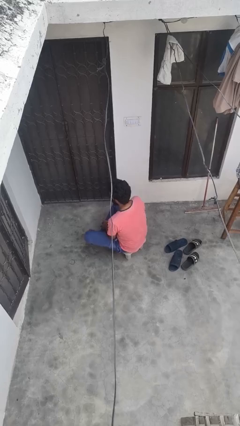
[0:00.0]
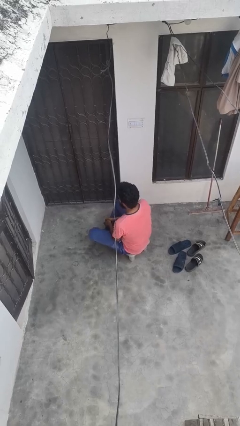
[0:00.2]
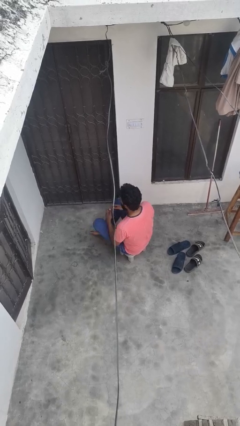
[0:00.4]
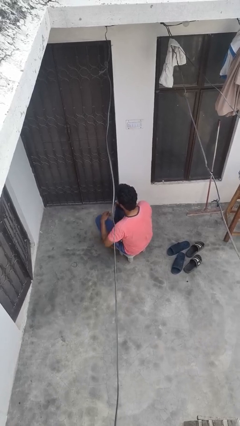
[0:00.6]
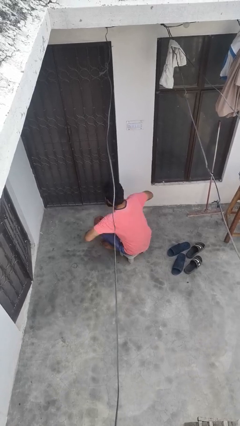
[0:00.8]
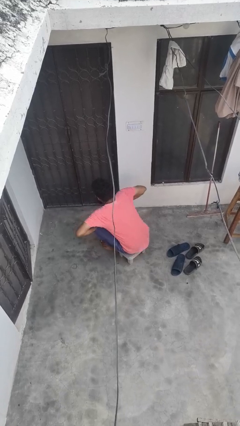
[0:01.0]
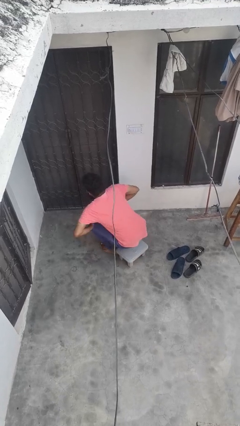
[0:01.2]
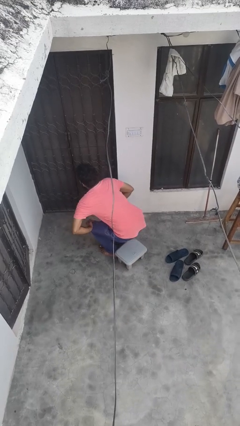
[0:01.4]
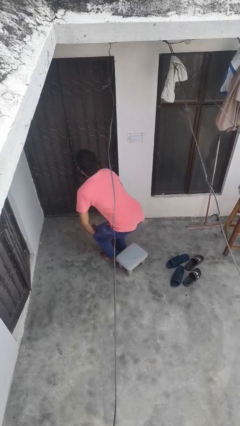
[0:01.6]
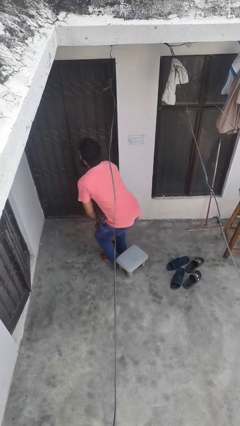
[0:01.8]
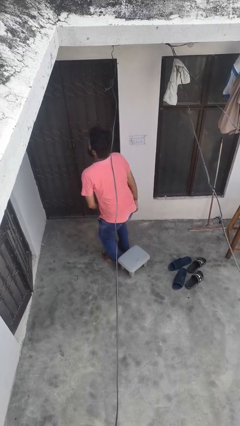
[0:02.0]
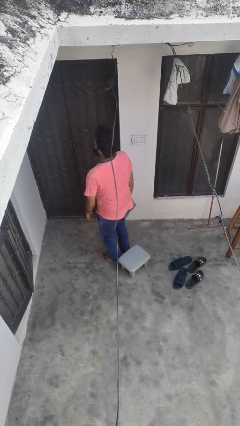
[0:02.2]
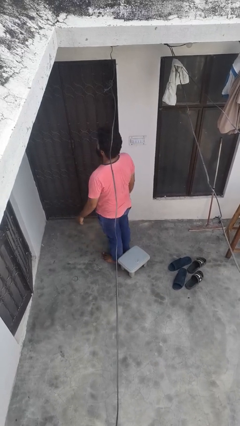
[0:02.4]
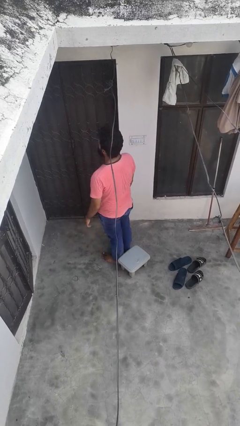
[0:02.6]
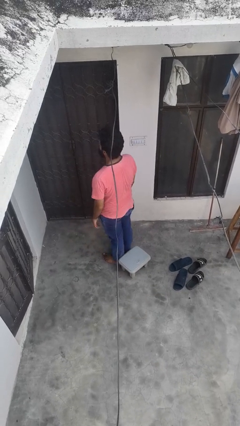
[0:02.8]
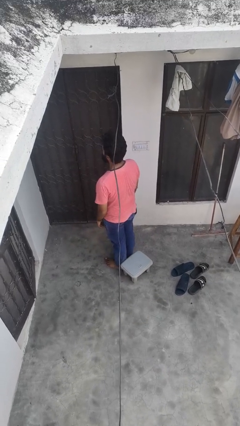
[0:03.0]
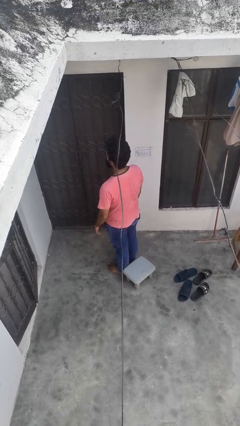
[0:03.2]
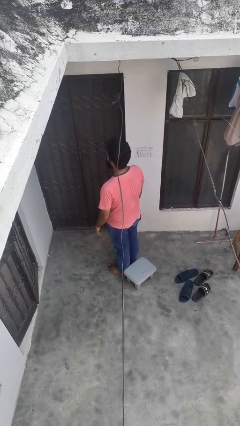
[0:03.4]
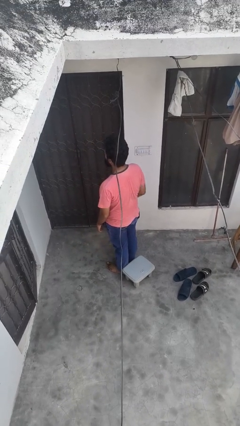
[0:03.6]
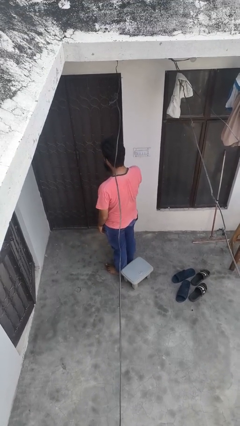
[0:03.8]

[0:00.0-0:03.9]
person stands up from floor

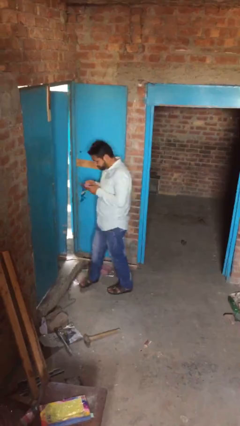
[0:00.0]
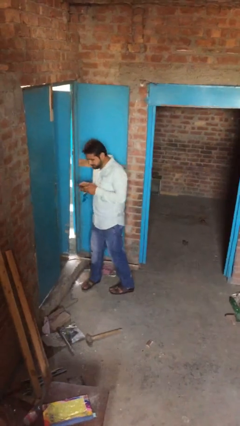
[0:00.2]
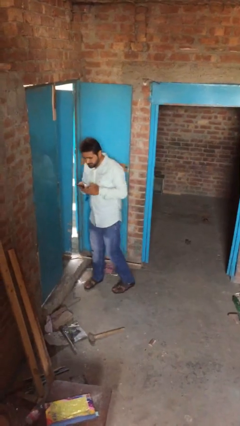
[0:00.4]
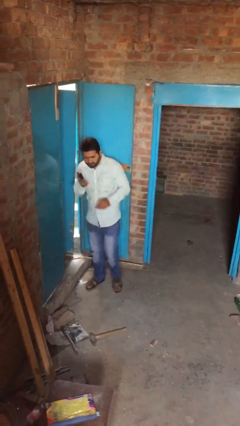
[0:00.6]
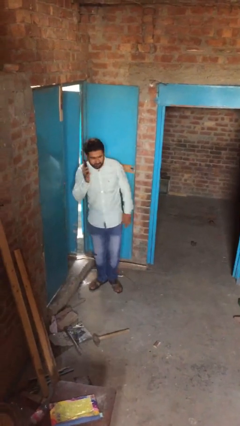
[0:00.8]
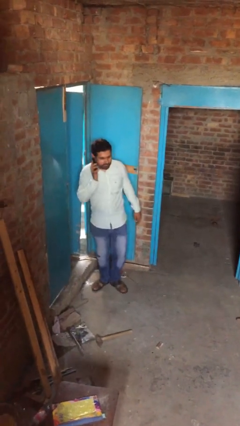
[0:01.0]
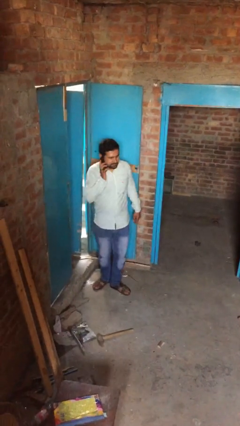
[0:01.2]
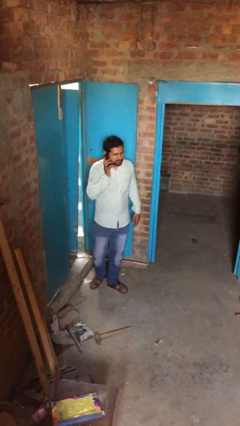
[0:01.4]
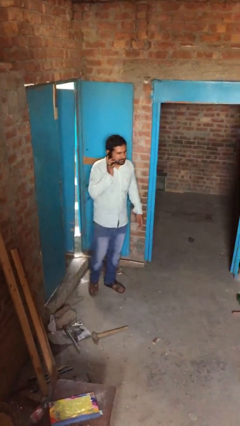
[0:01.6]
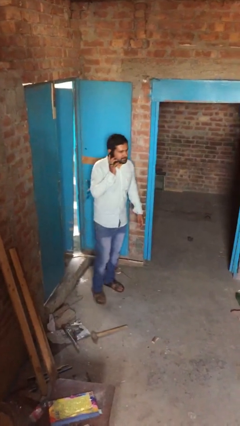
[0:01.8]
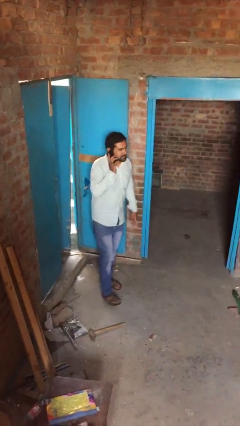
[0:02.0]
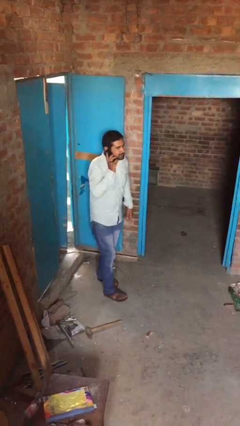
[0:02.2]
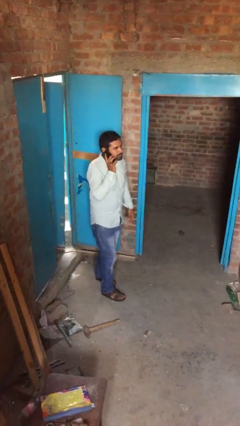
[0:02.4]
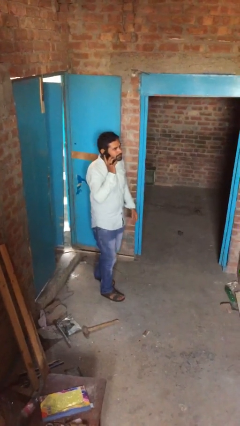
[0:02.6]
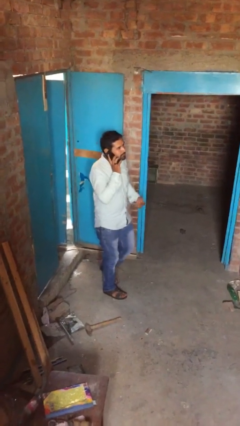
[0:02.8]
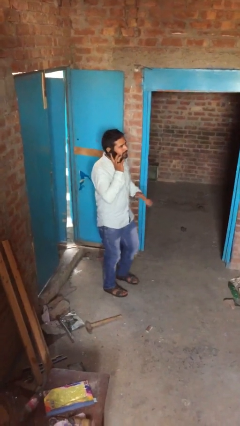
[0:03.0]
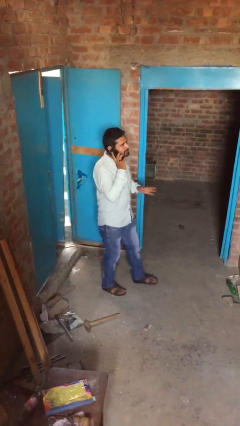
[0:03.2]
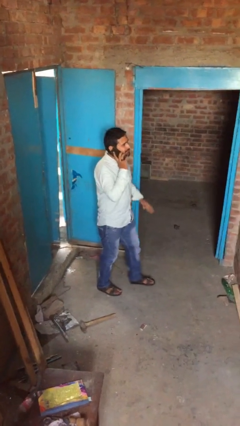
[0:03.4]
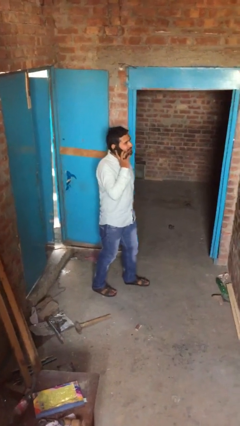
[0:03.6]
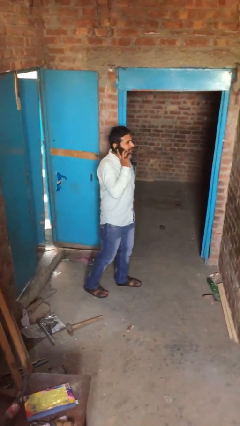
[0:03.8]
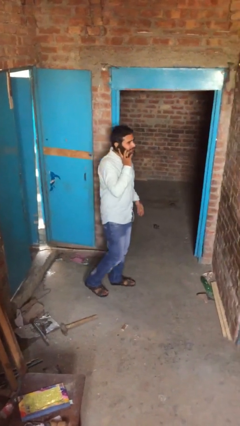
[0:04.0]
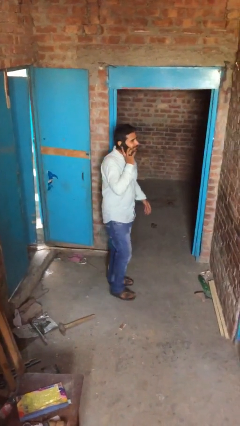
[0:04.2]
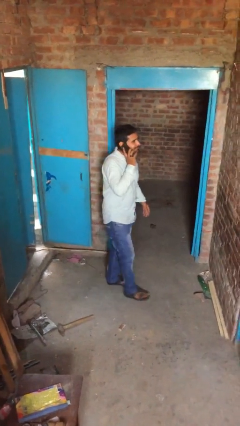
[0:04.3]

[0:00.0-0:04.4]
person talks on phone

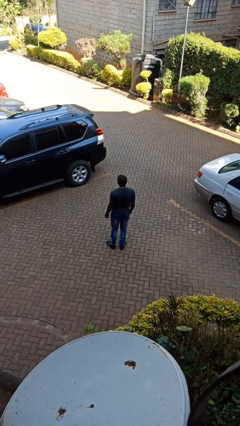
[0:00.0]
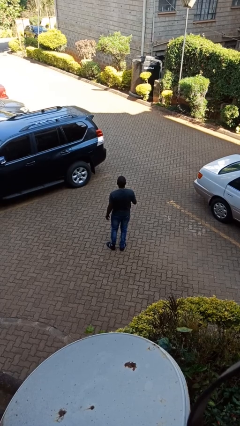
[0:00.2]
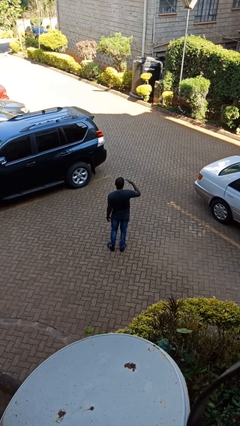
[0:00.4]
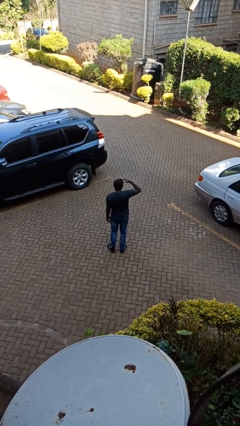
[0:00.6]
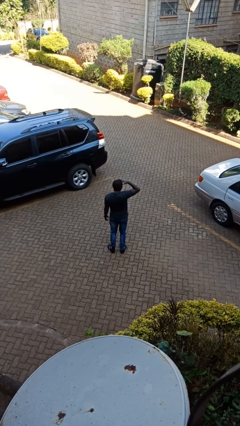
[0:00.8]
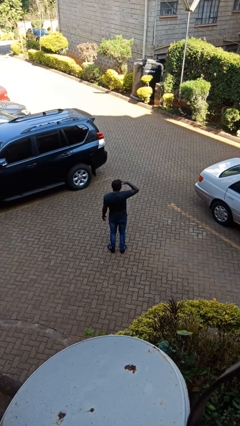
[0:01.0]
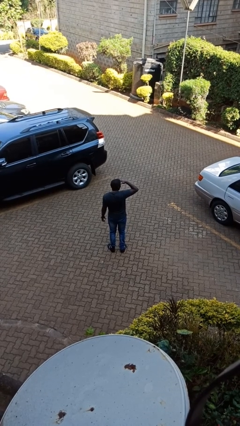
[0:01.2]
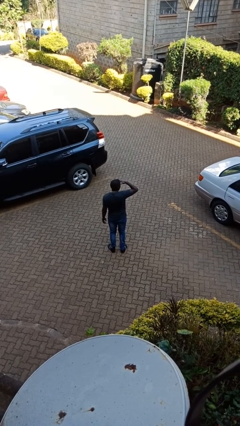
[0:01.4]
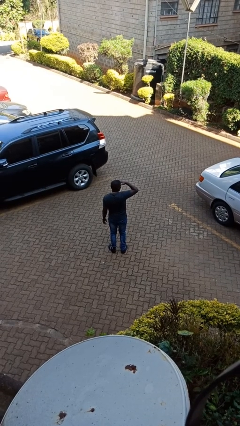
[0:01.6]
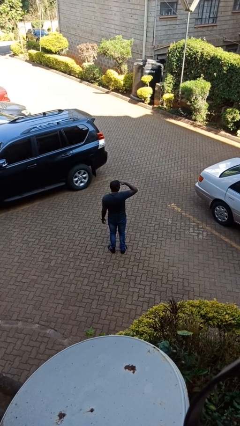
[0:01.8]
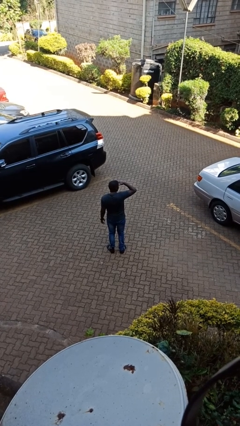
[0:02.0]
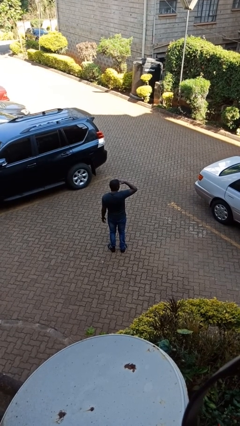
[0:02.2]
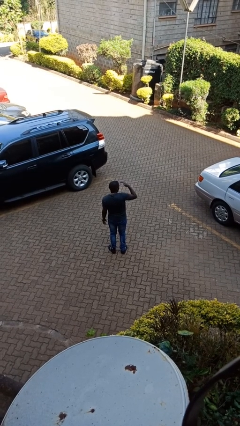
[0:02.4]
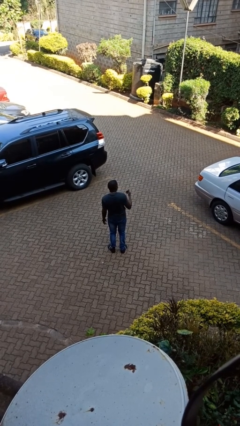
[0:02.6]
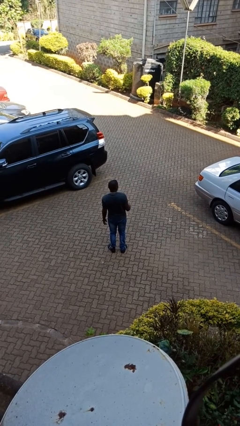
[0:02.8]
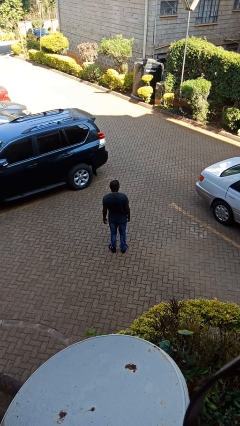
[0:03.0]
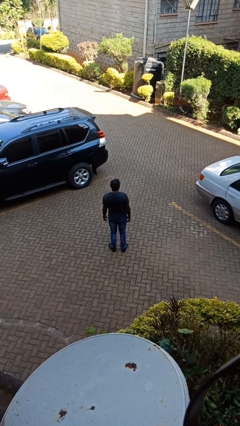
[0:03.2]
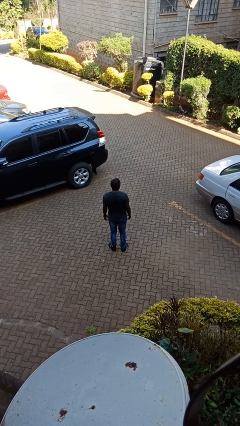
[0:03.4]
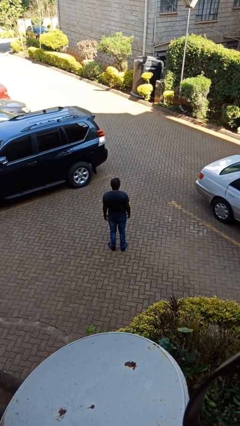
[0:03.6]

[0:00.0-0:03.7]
person shades eyes

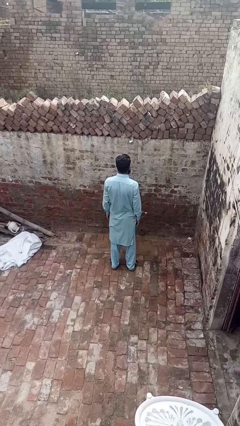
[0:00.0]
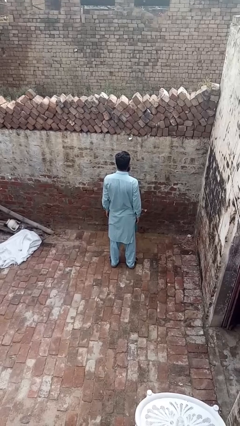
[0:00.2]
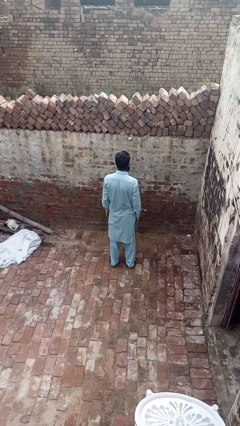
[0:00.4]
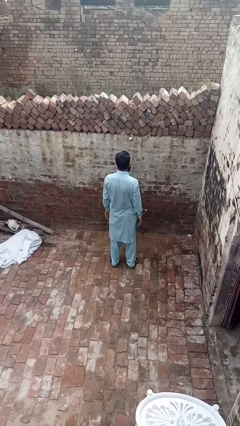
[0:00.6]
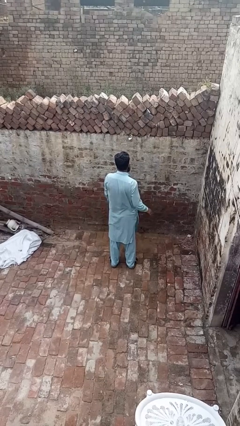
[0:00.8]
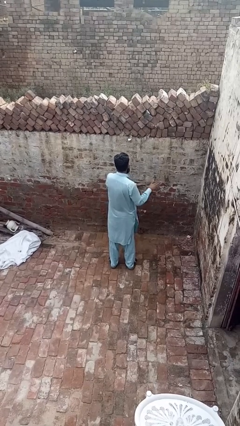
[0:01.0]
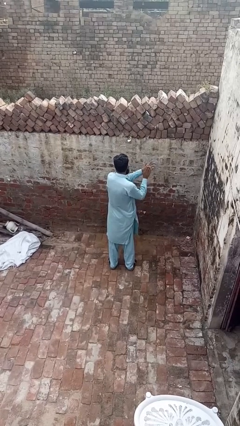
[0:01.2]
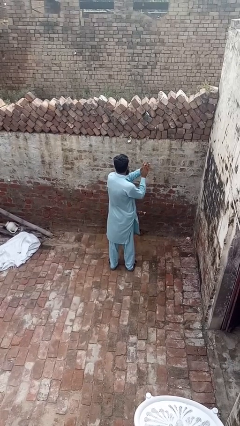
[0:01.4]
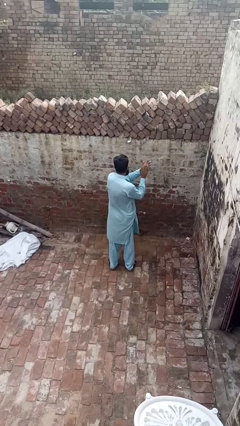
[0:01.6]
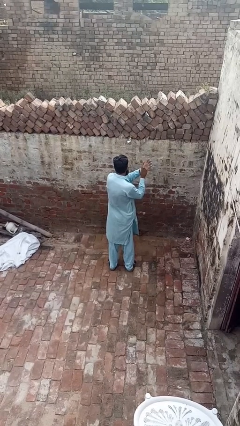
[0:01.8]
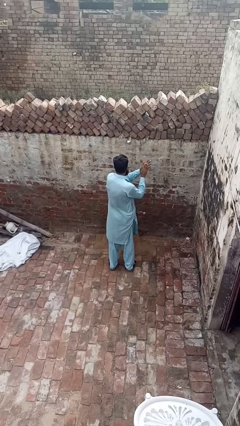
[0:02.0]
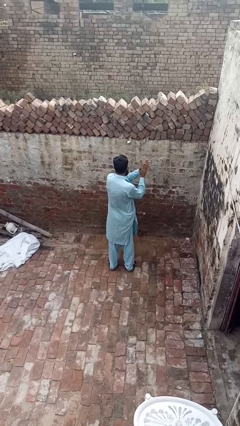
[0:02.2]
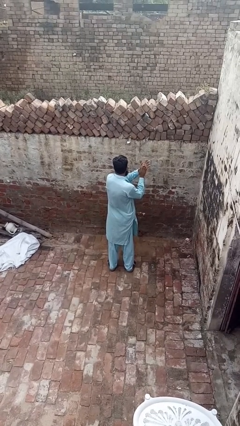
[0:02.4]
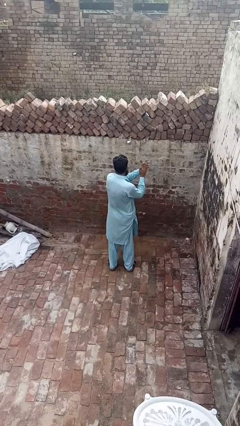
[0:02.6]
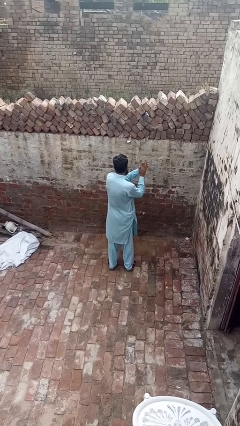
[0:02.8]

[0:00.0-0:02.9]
person claps hands

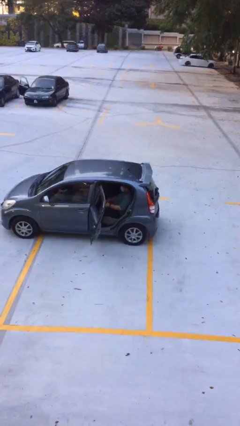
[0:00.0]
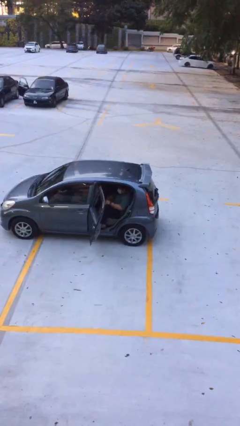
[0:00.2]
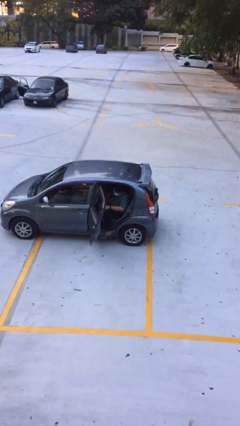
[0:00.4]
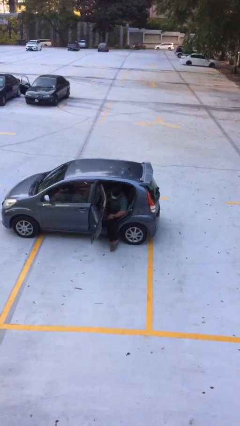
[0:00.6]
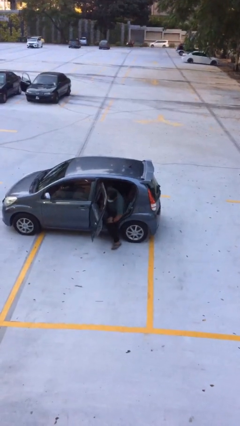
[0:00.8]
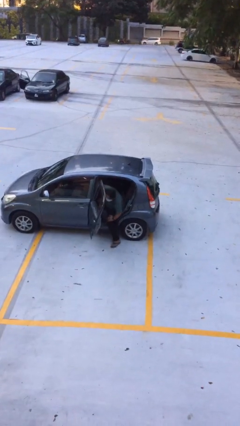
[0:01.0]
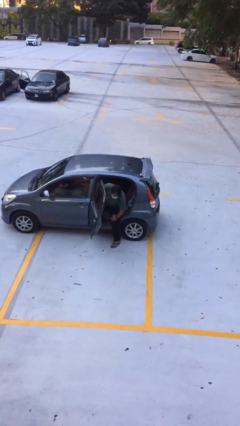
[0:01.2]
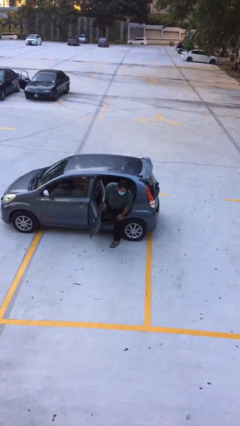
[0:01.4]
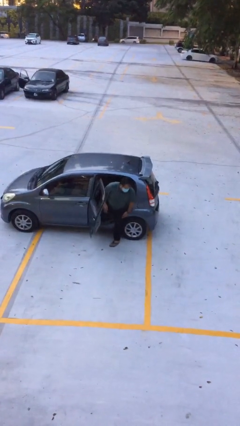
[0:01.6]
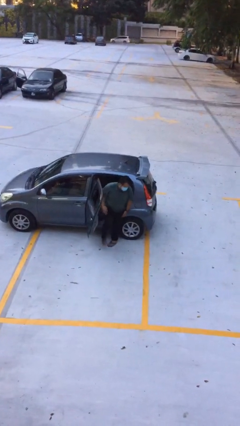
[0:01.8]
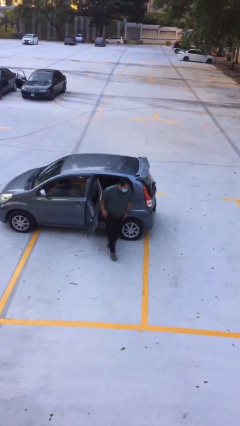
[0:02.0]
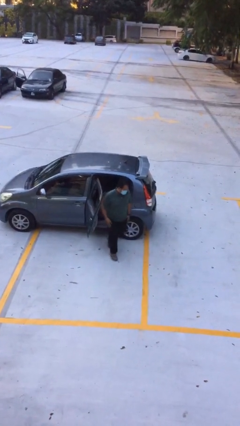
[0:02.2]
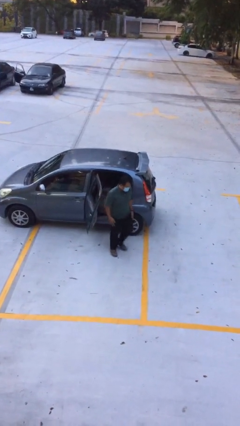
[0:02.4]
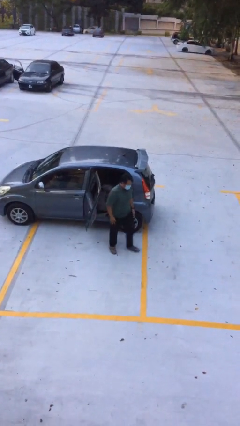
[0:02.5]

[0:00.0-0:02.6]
person exits car

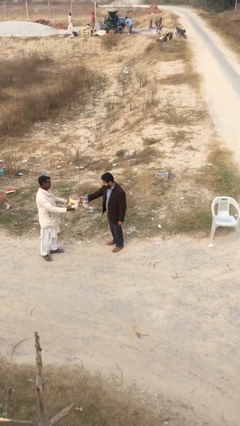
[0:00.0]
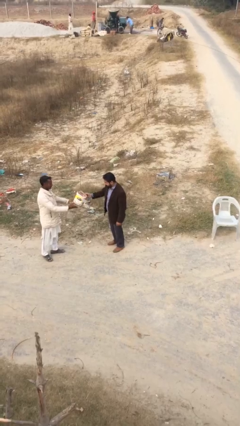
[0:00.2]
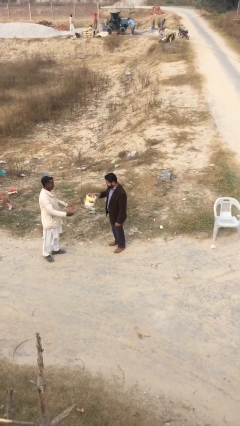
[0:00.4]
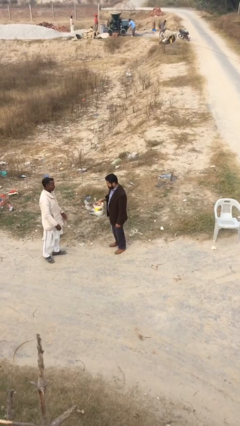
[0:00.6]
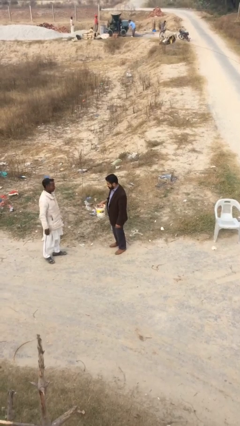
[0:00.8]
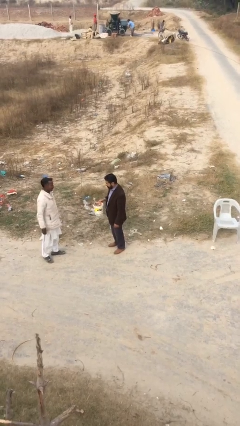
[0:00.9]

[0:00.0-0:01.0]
person transfers object to person
